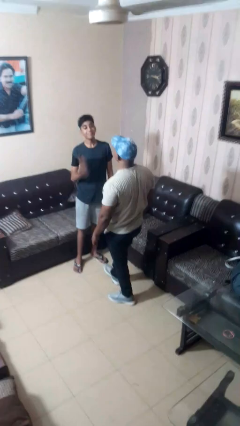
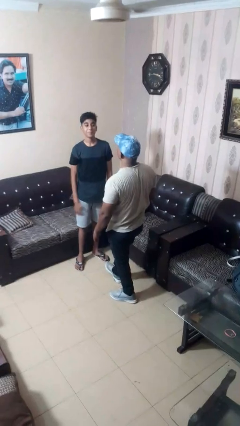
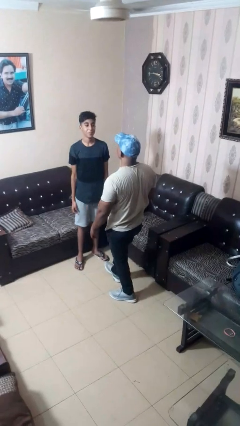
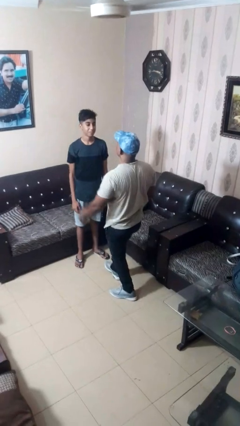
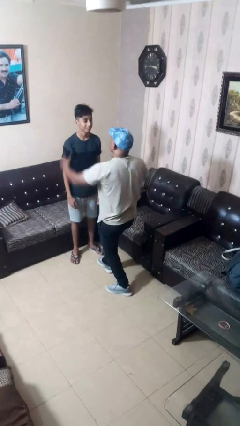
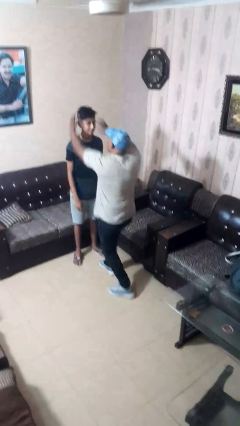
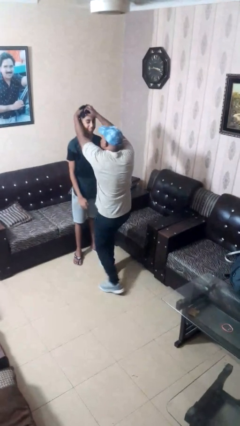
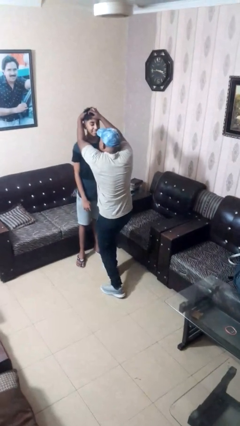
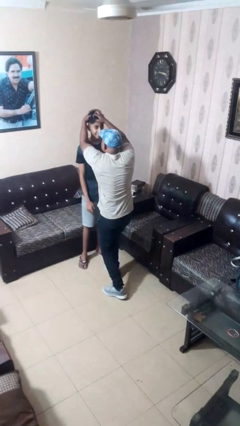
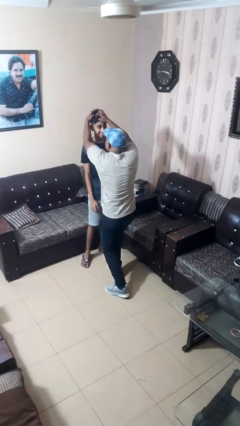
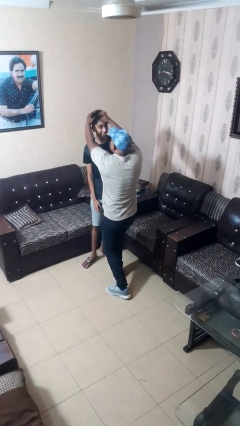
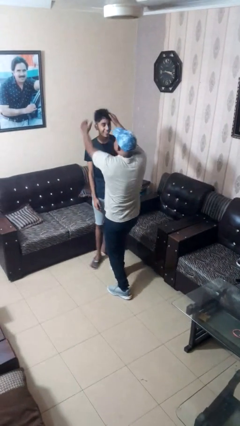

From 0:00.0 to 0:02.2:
person grabs person by hair

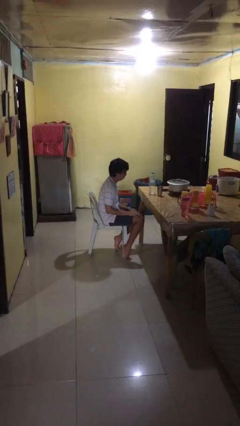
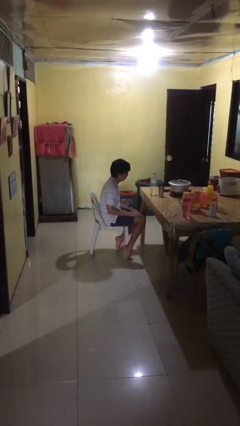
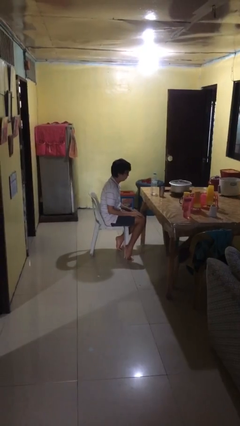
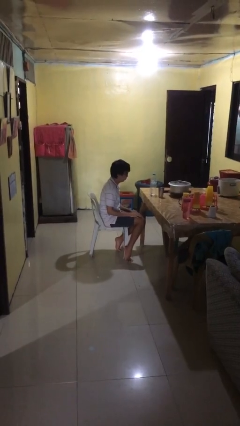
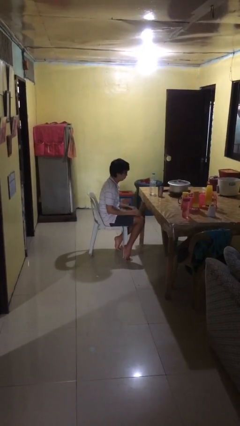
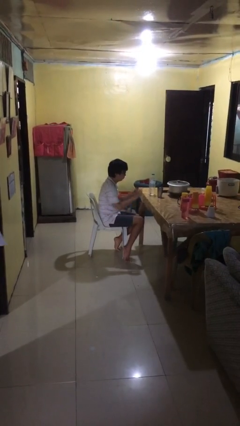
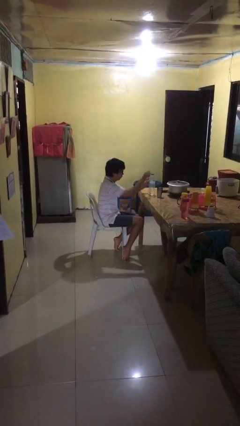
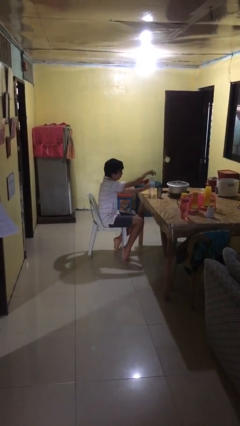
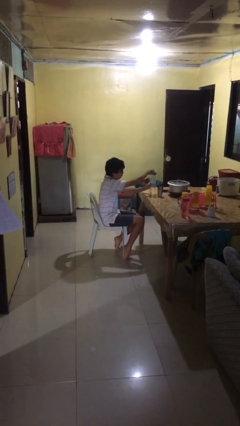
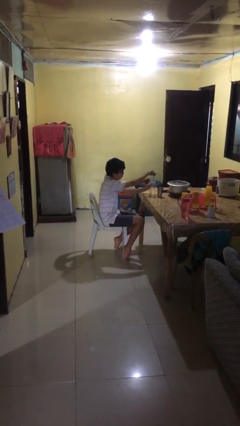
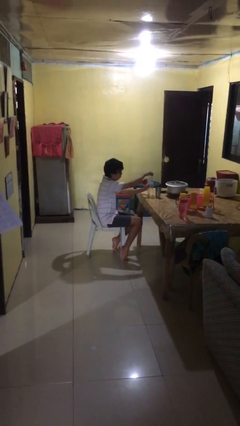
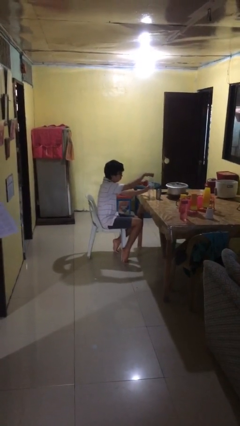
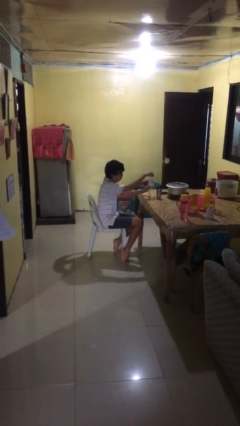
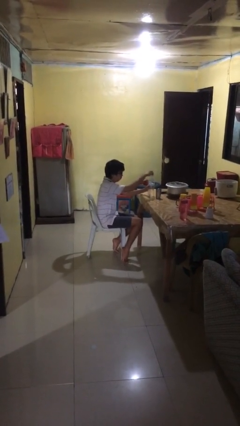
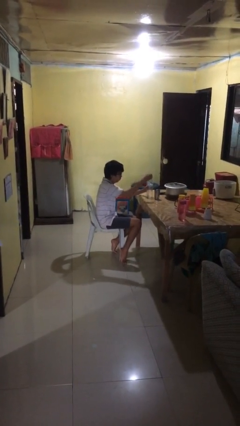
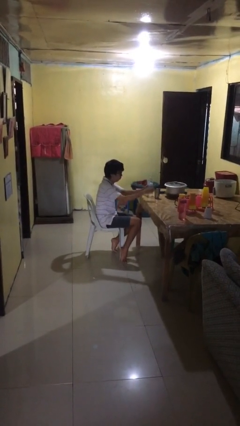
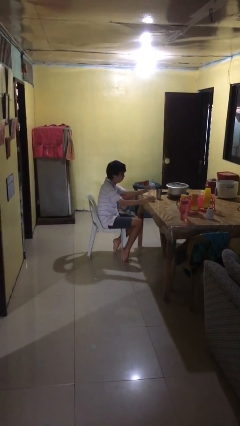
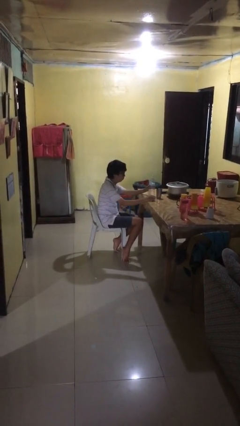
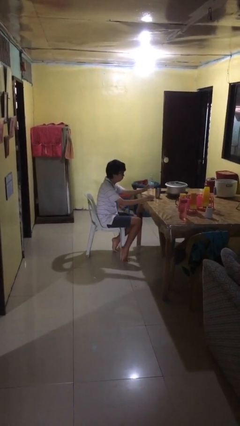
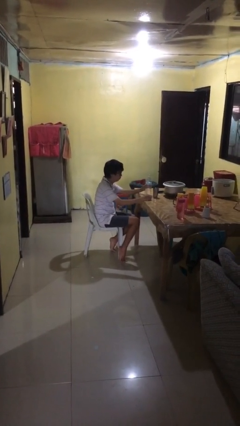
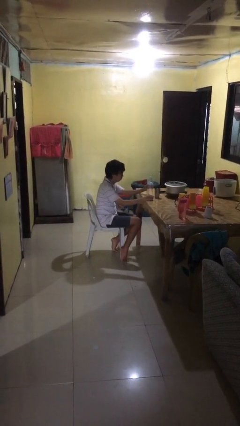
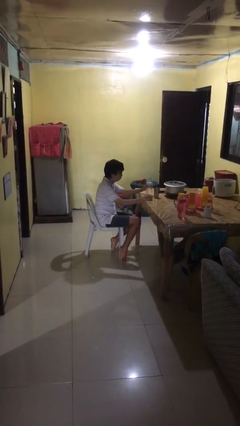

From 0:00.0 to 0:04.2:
person unscrews lid from bottle

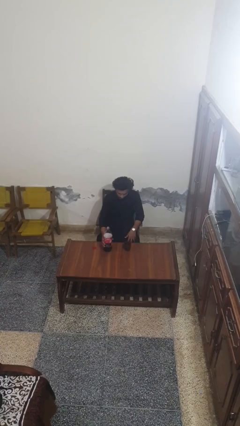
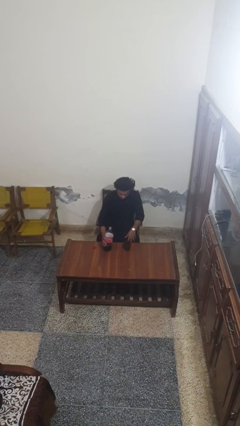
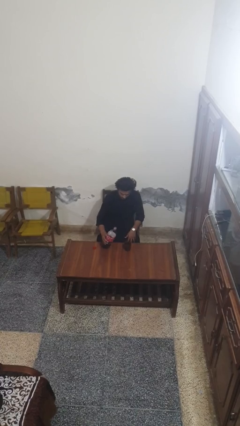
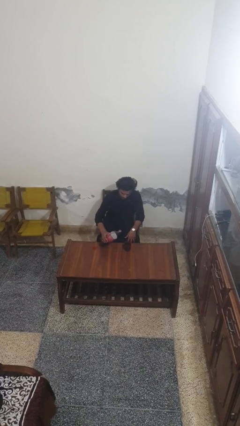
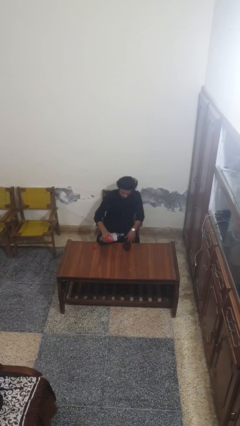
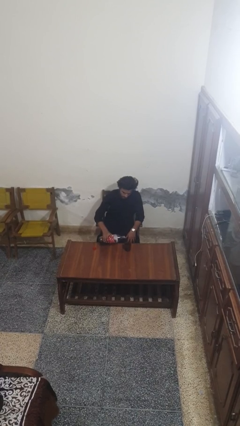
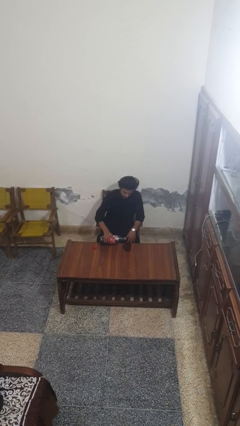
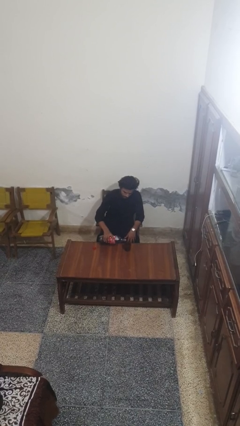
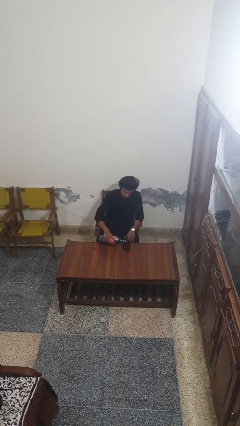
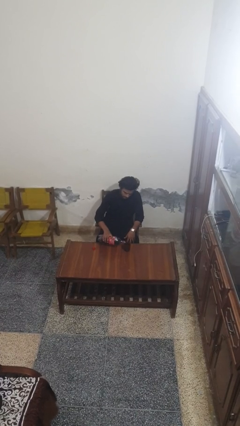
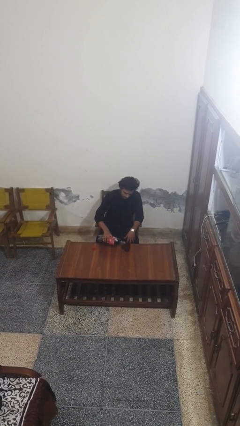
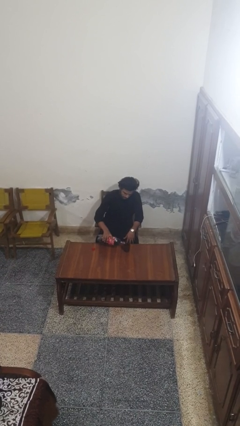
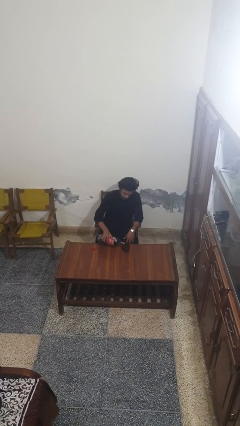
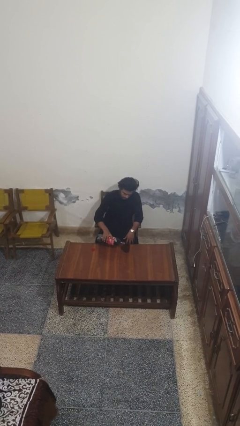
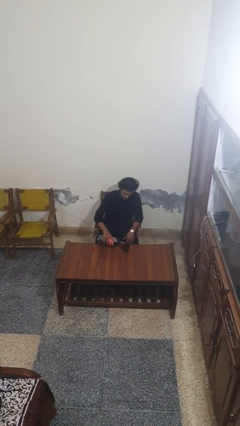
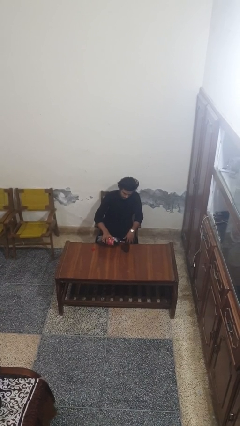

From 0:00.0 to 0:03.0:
person pours liquid into cup

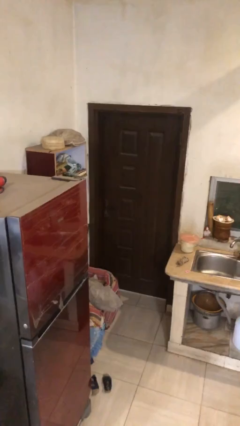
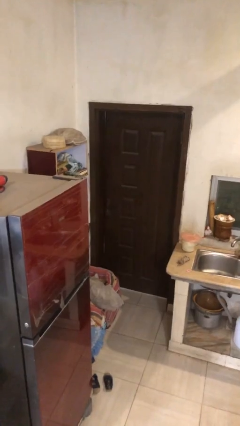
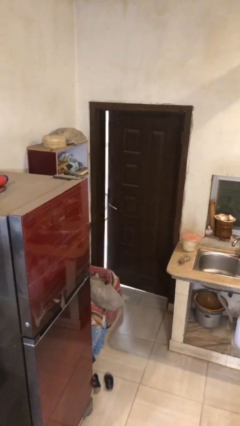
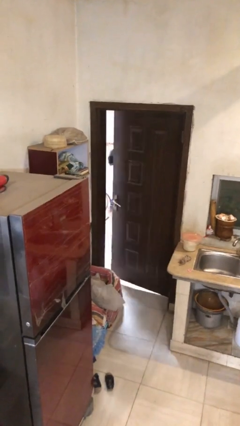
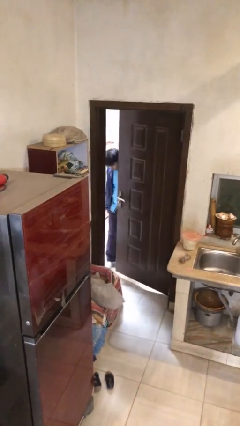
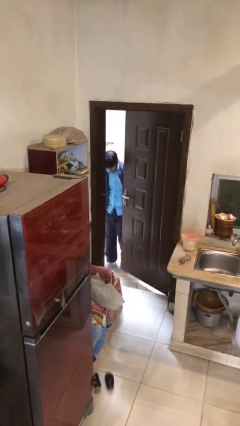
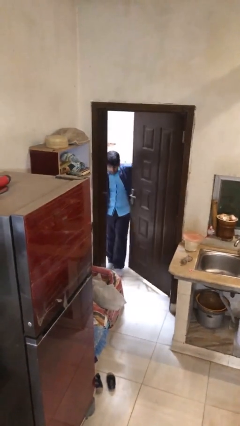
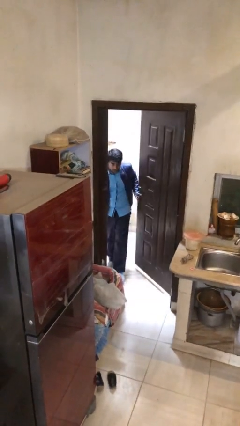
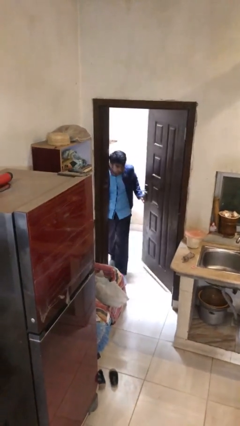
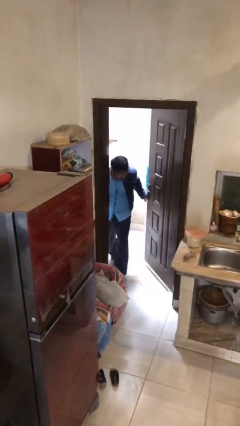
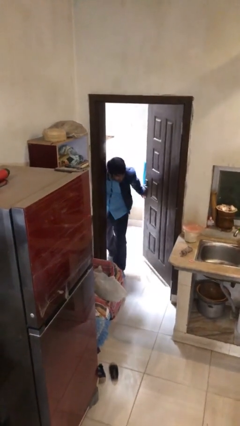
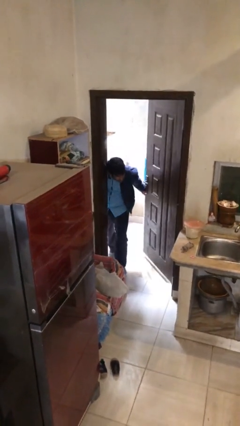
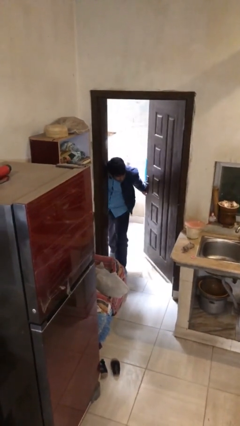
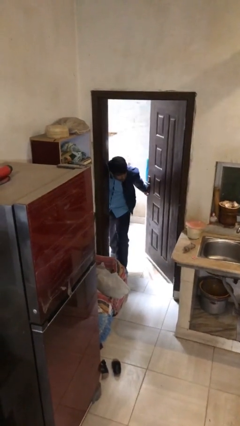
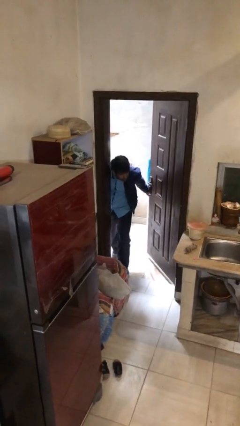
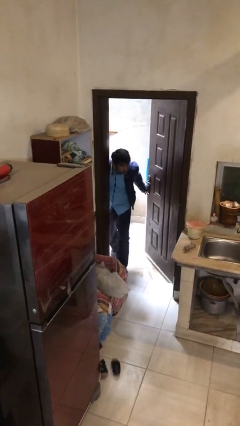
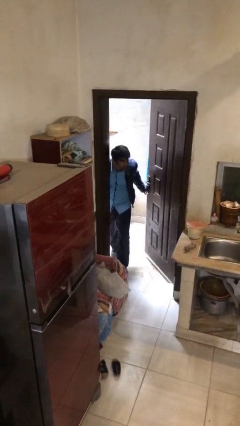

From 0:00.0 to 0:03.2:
person opens facility door

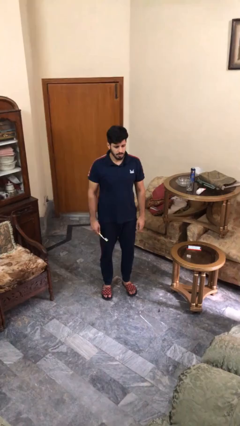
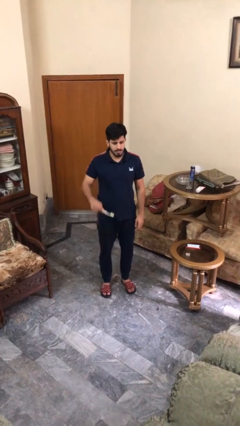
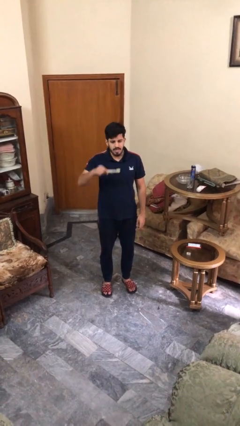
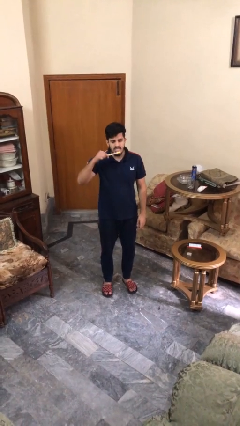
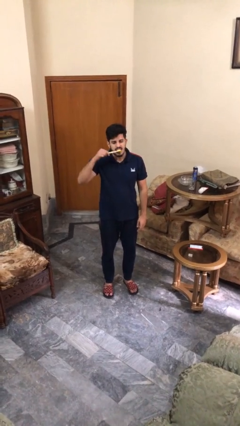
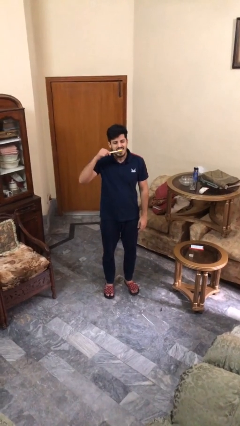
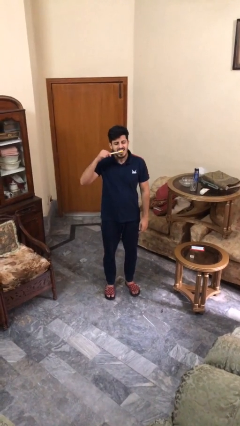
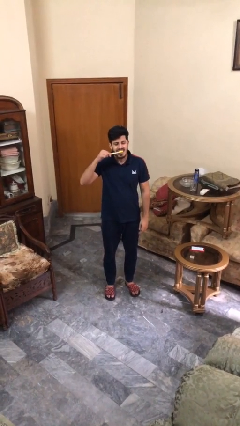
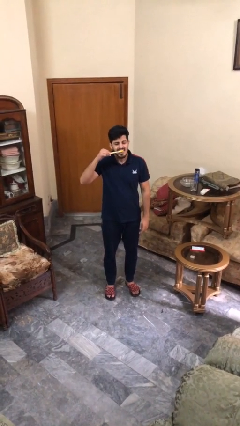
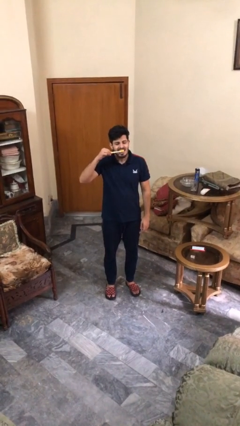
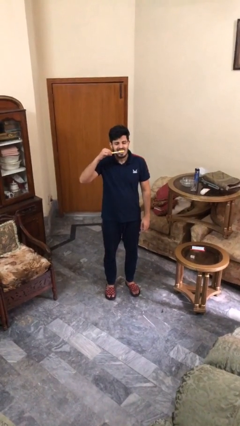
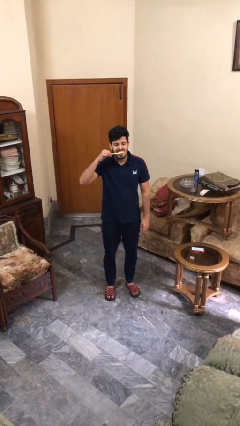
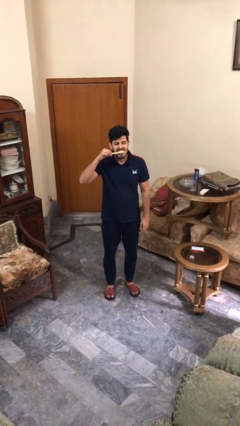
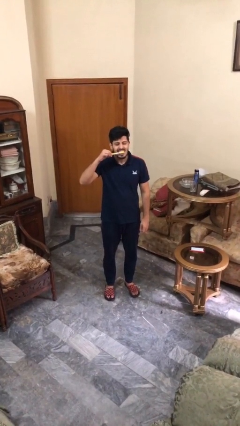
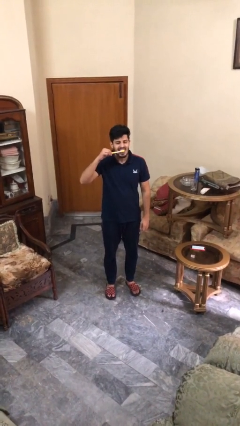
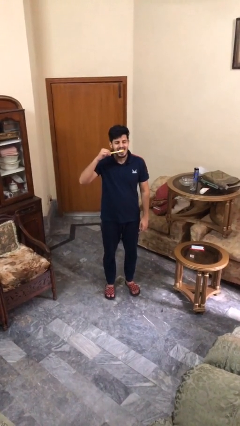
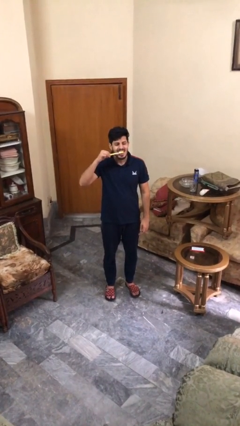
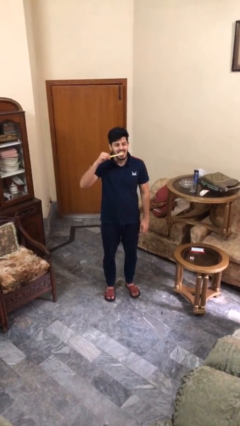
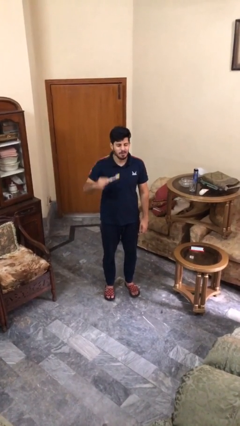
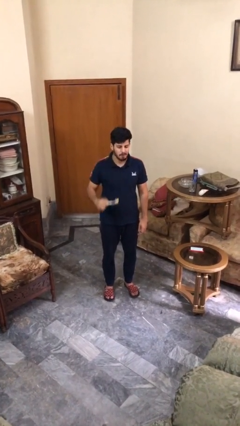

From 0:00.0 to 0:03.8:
person brushes teeth

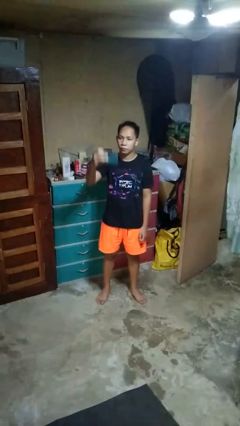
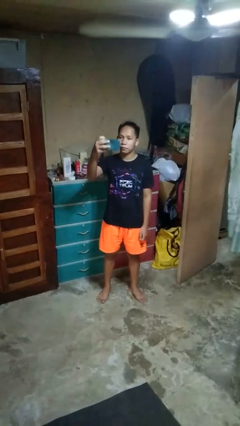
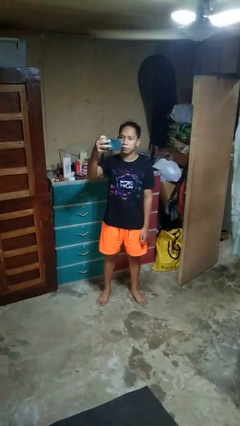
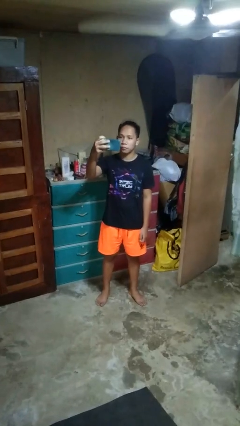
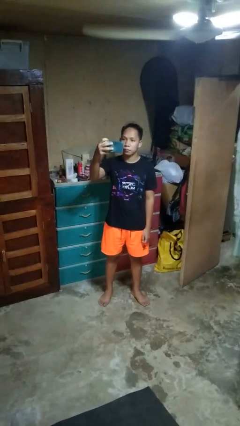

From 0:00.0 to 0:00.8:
person takes selfie
